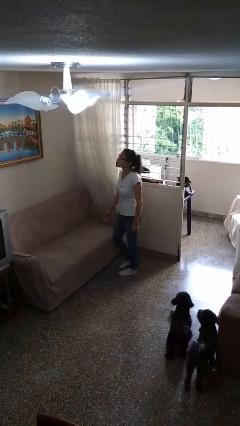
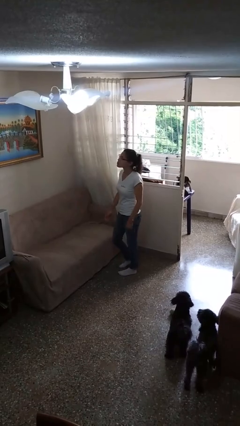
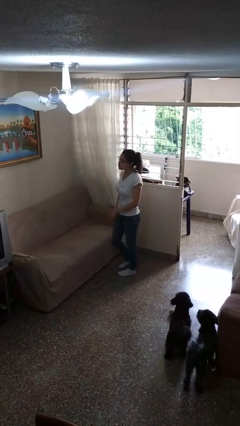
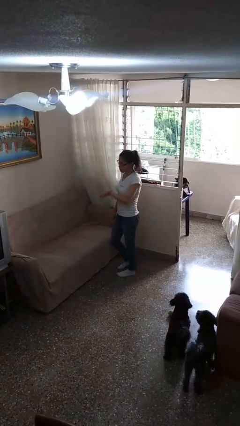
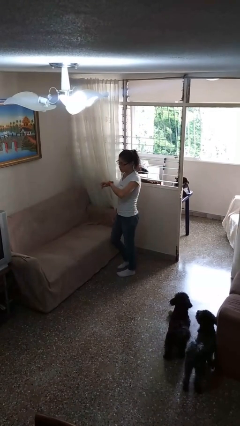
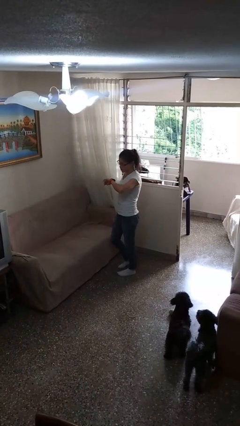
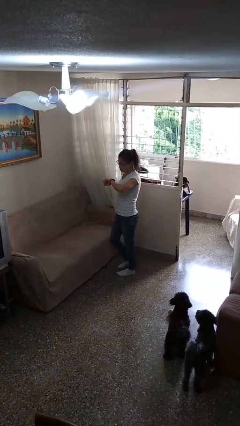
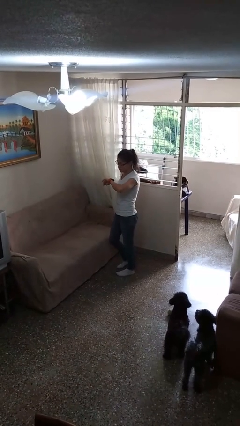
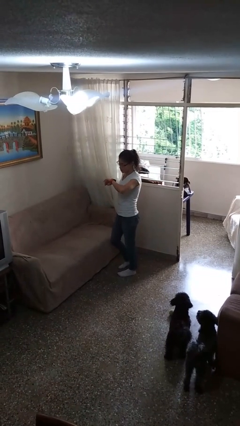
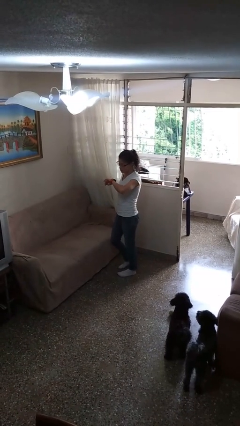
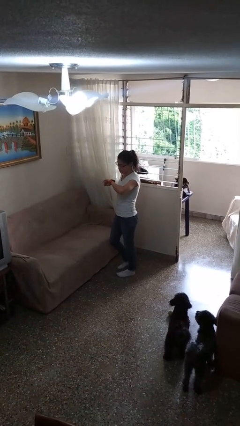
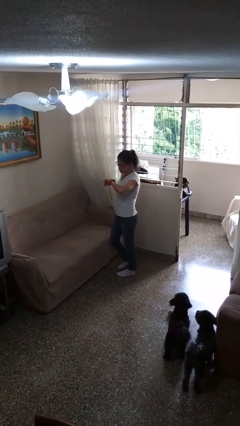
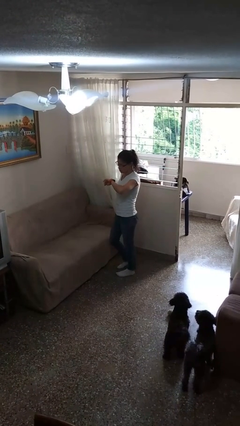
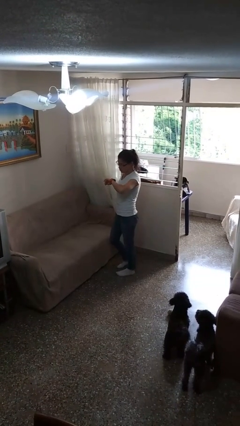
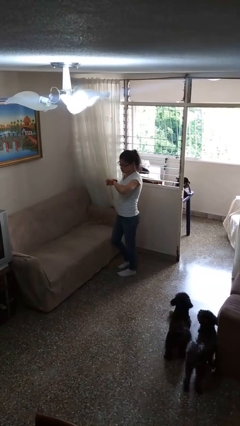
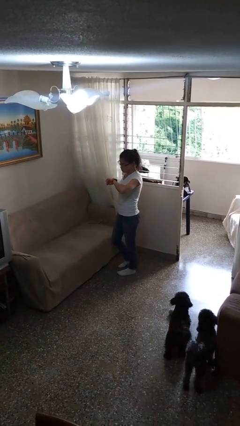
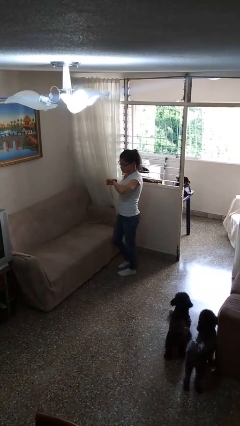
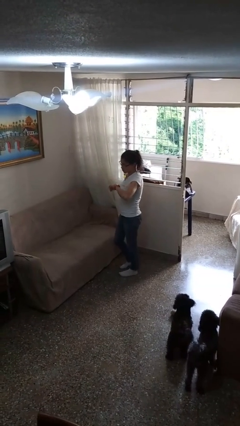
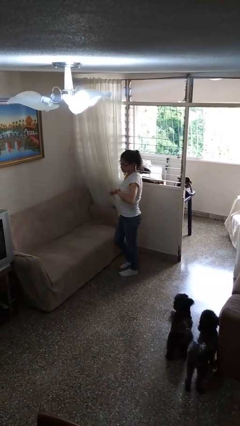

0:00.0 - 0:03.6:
person looks at wristwatch

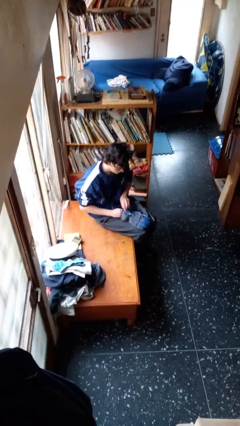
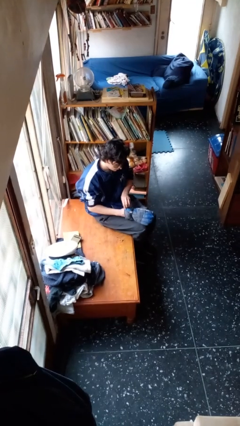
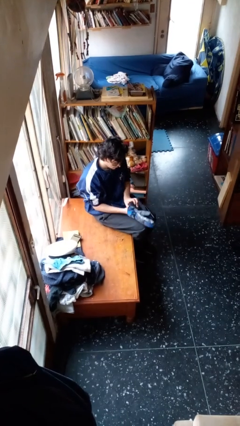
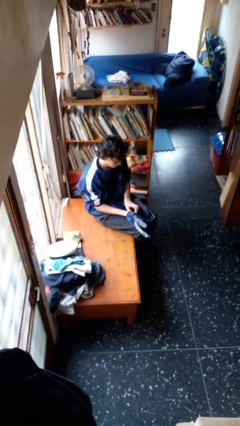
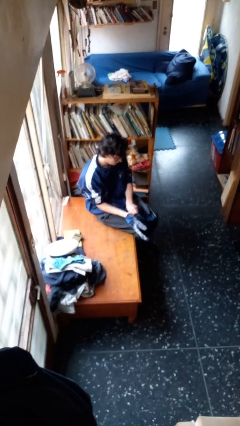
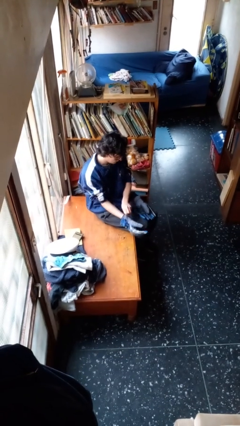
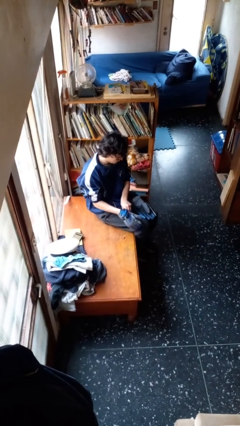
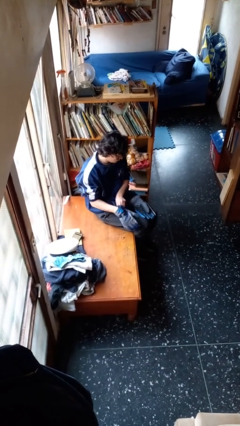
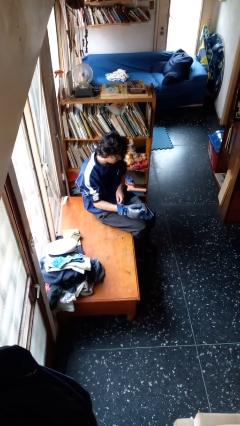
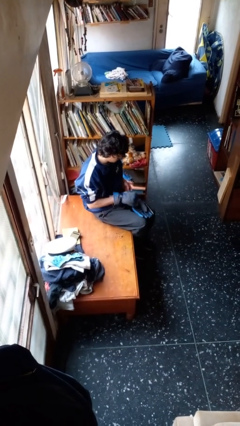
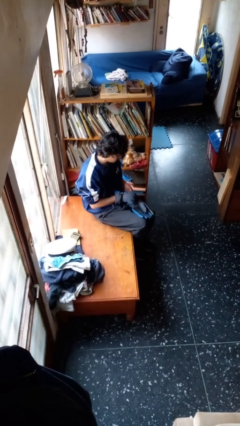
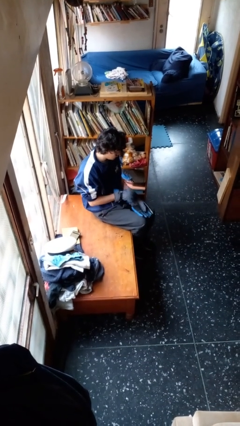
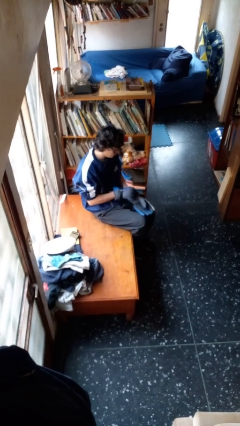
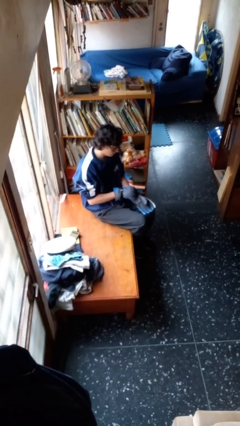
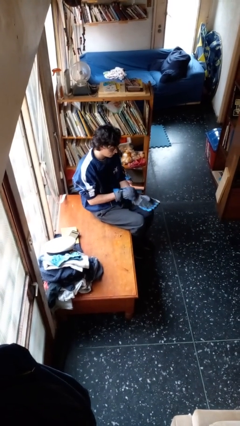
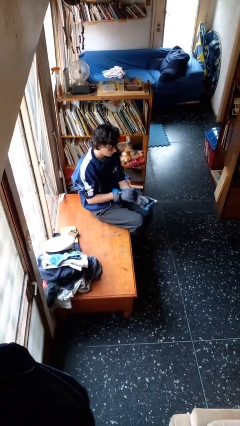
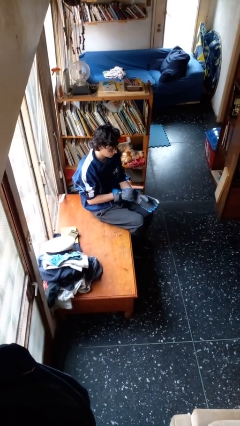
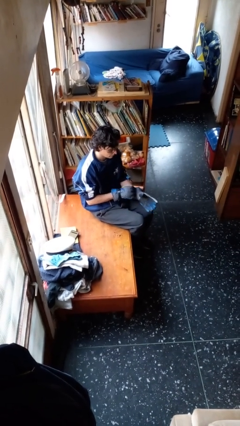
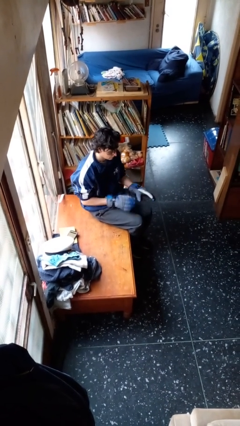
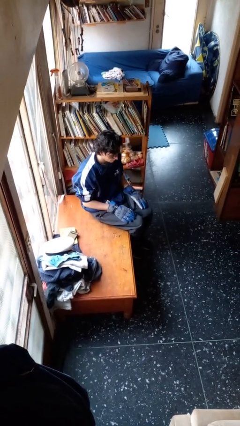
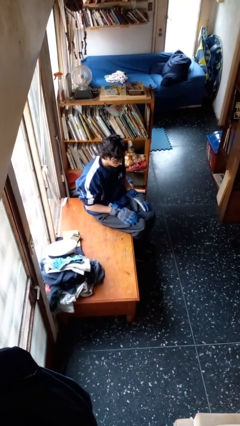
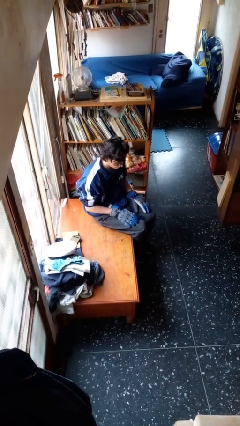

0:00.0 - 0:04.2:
person puts on gloves

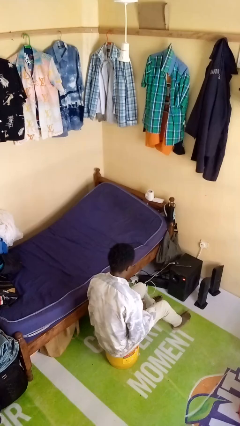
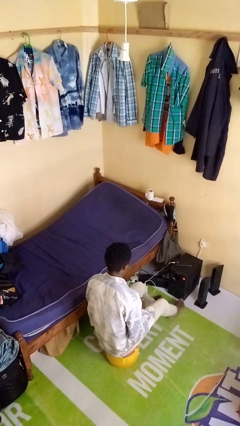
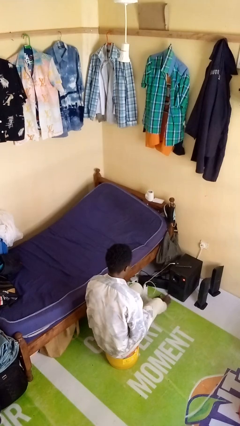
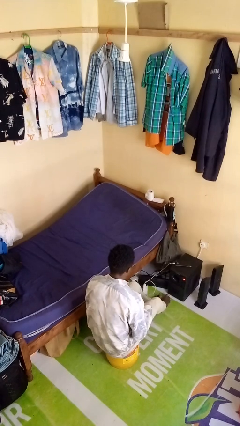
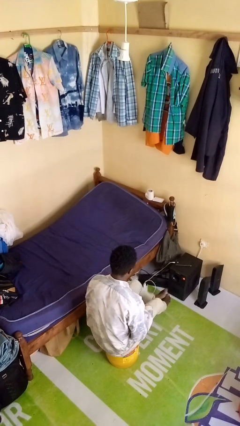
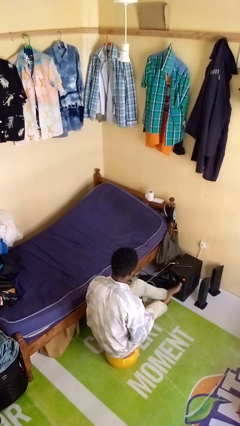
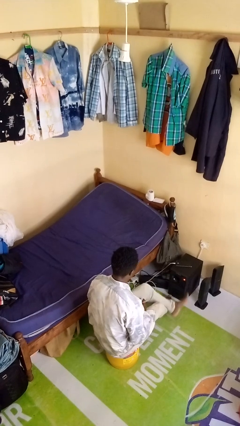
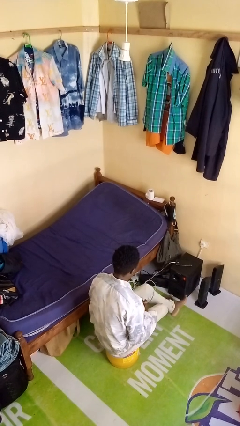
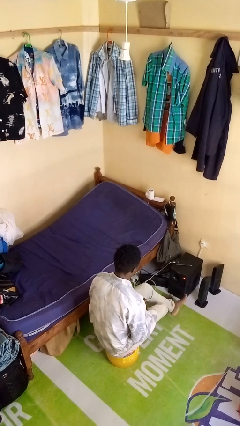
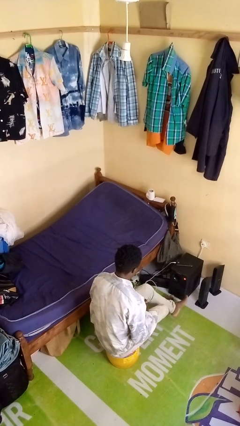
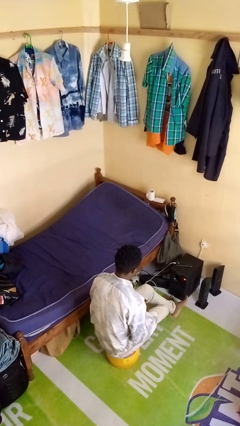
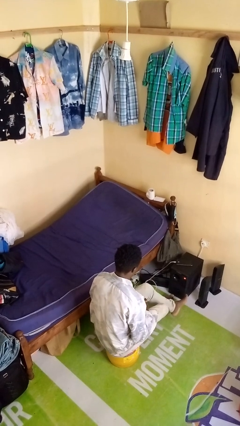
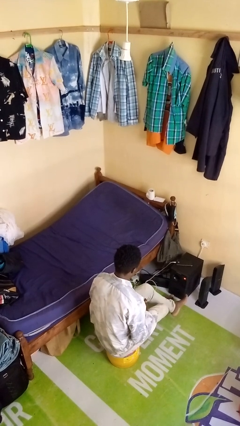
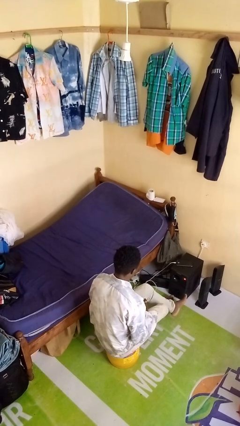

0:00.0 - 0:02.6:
person crosses legs

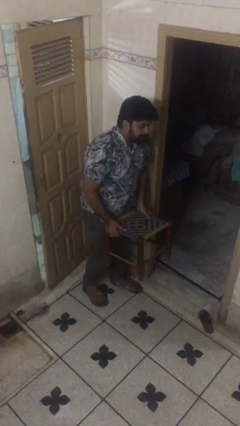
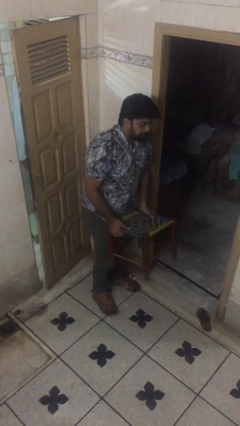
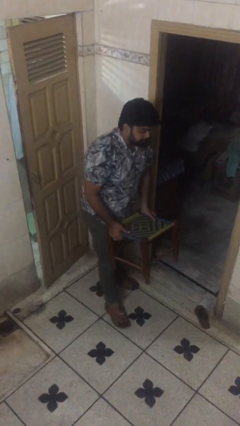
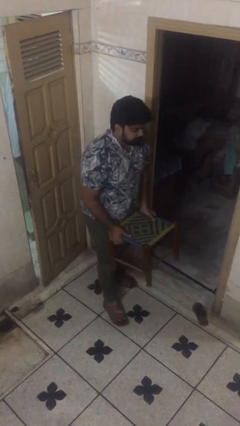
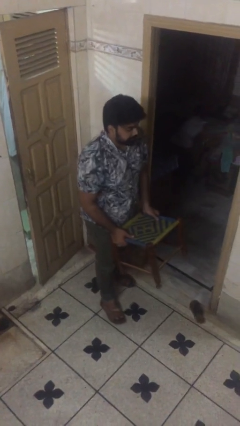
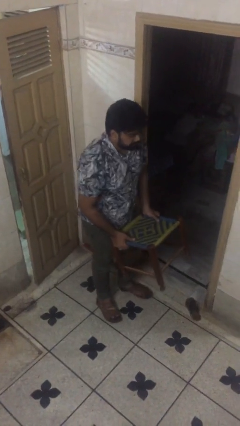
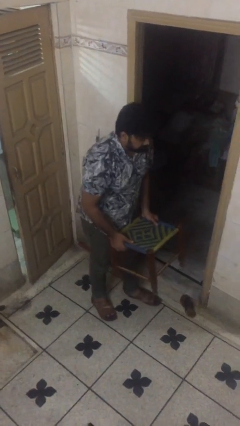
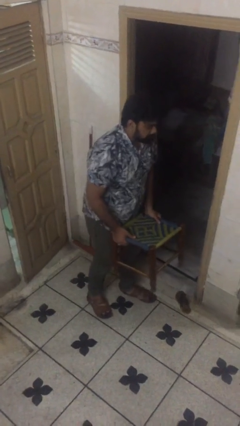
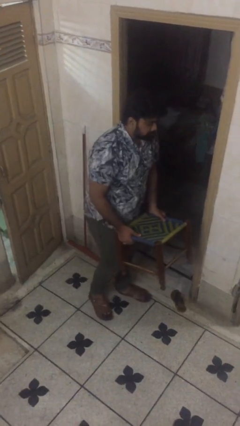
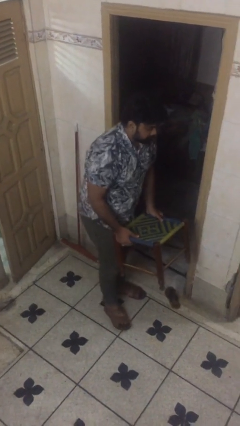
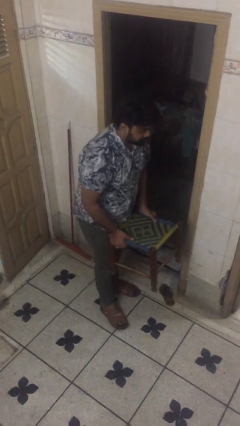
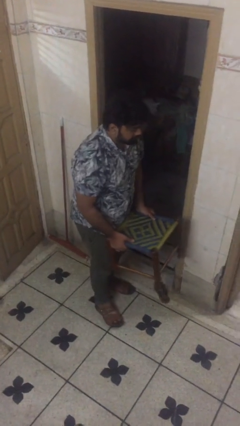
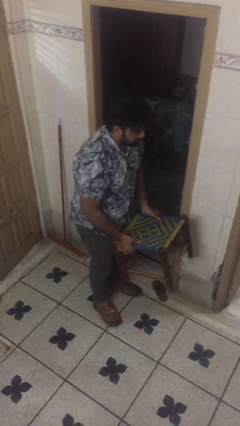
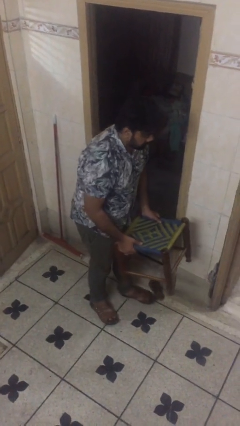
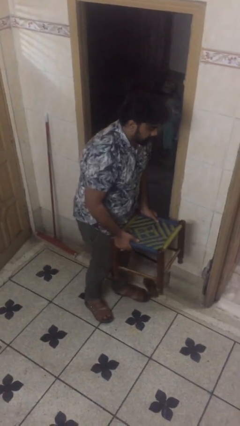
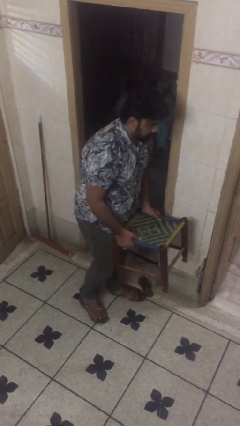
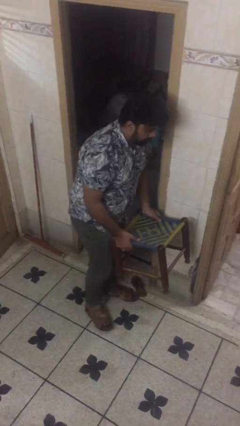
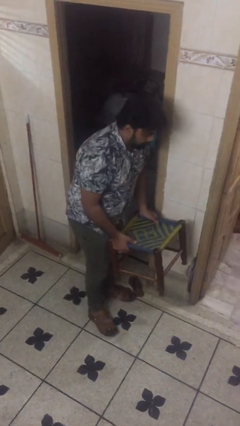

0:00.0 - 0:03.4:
person carries heavy object

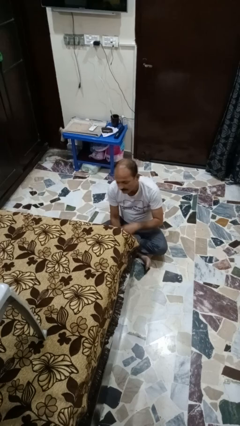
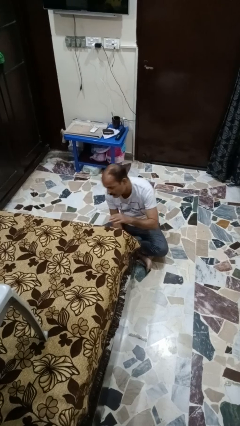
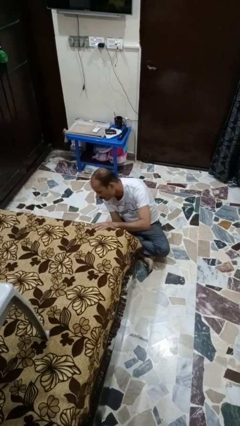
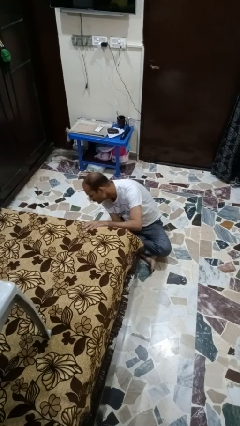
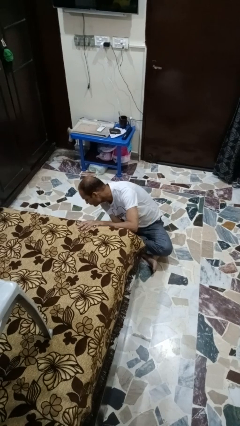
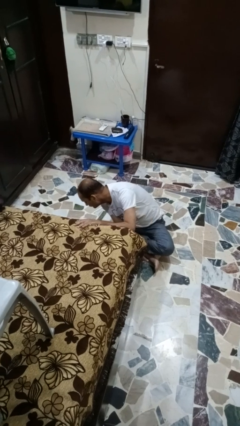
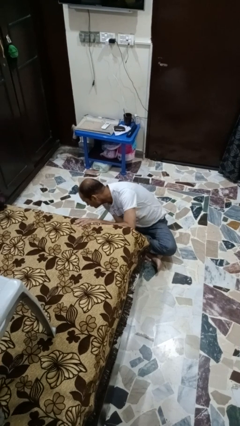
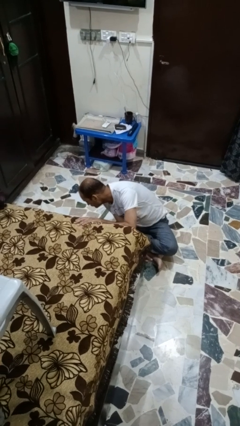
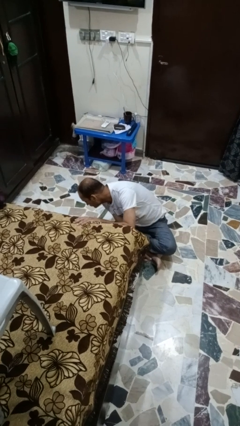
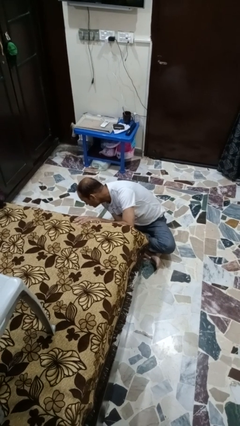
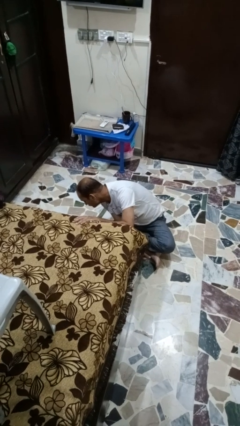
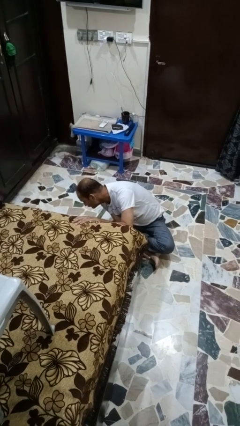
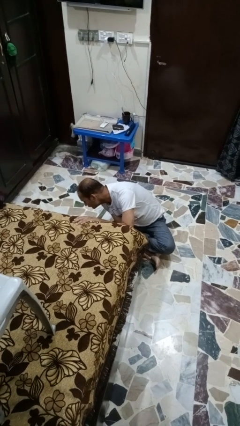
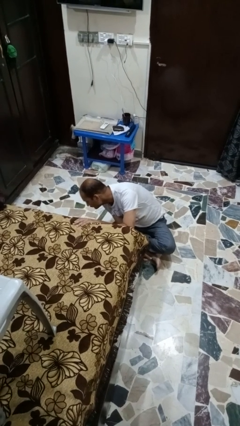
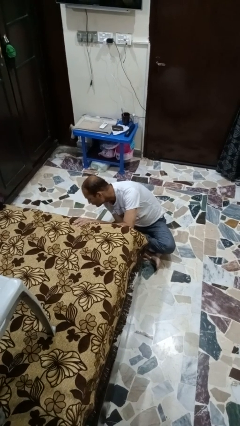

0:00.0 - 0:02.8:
person searches under bed

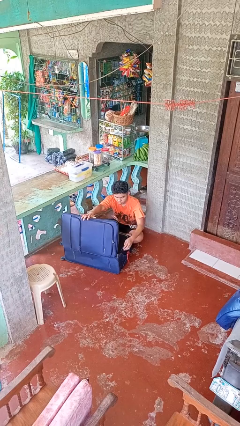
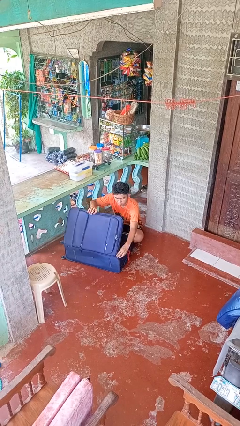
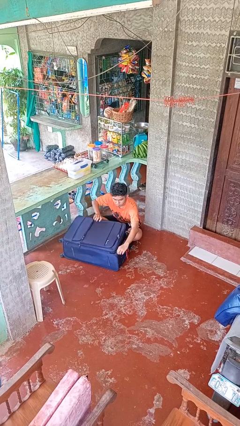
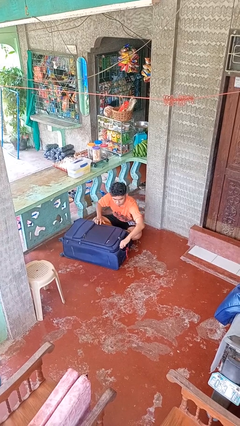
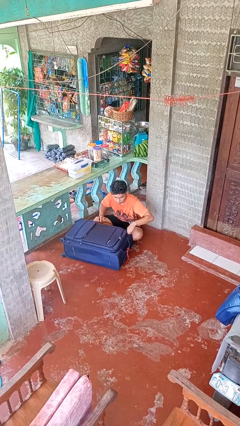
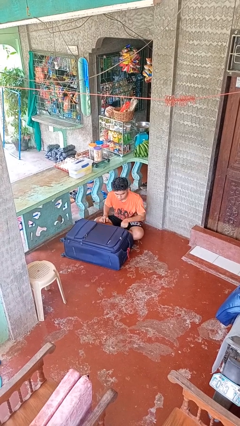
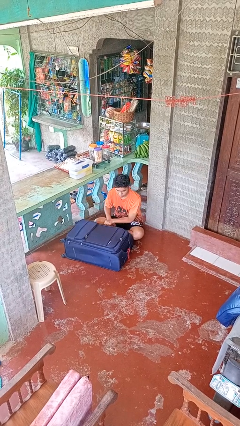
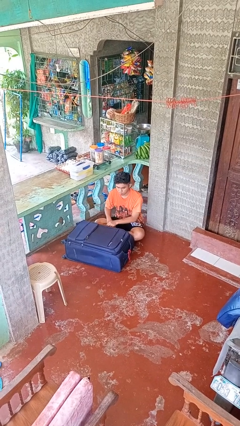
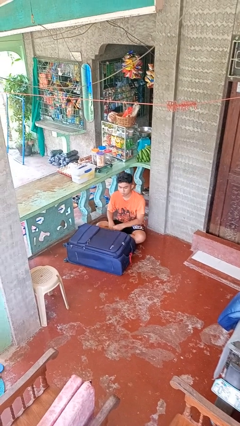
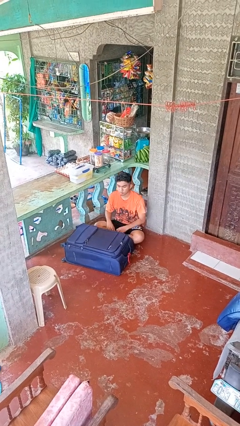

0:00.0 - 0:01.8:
person closes suitcase
